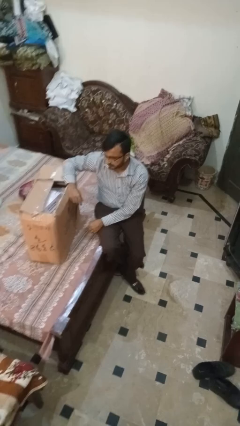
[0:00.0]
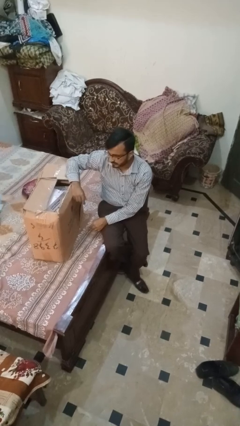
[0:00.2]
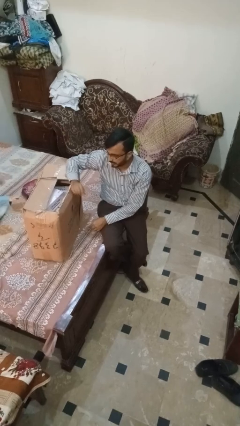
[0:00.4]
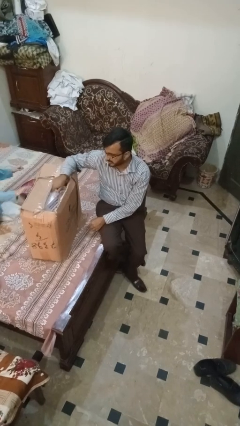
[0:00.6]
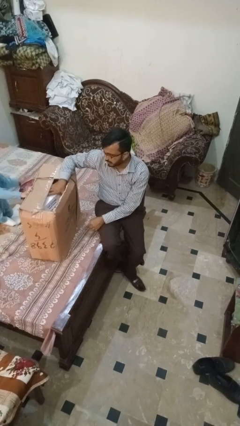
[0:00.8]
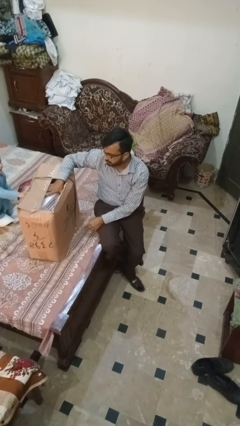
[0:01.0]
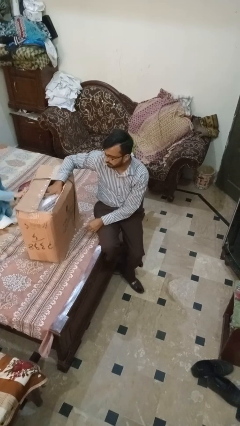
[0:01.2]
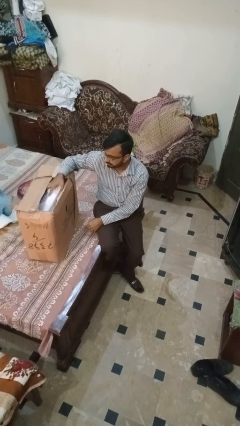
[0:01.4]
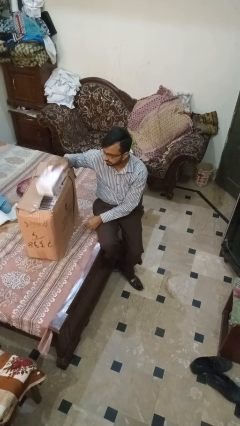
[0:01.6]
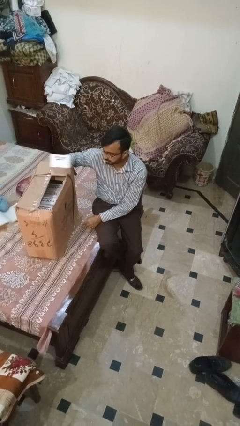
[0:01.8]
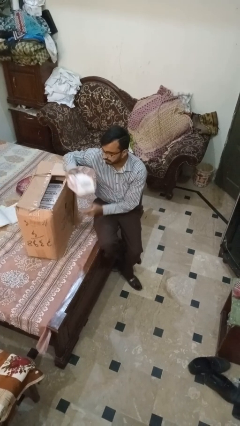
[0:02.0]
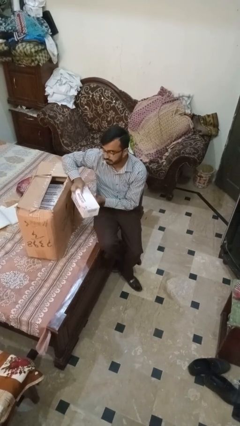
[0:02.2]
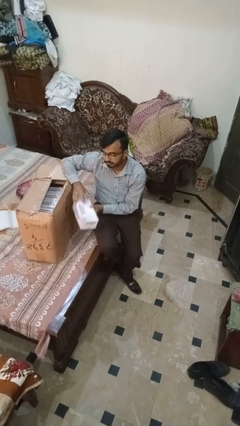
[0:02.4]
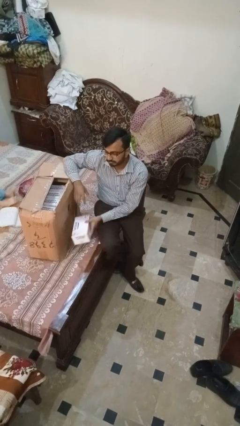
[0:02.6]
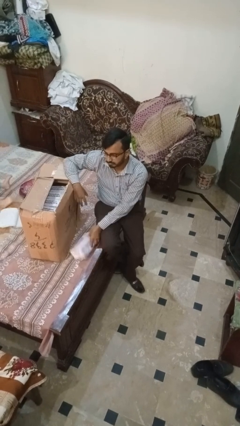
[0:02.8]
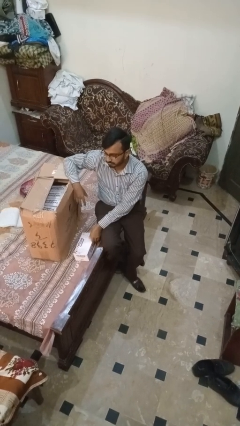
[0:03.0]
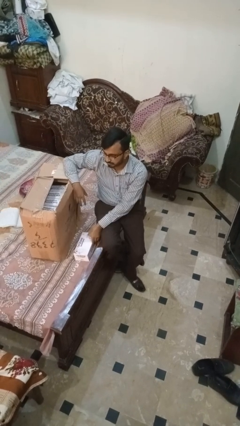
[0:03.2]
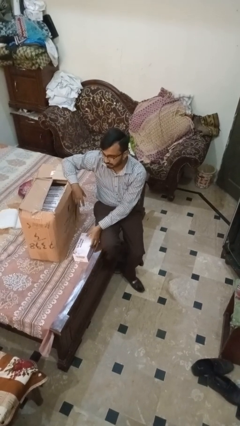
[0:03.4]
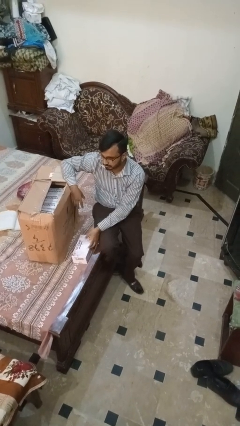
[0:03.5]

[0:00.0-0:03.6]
person takes object from box

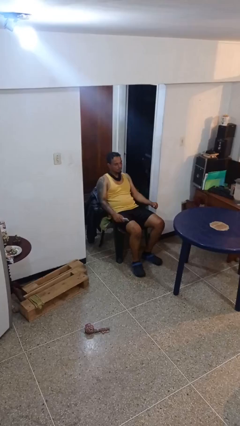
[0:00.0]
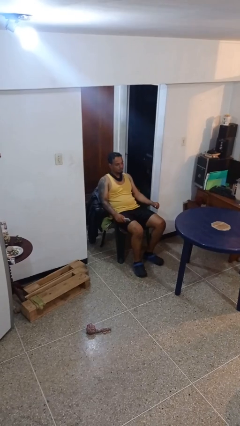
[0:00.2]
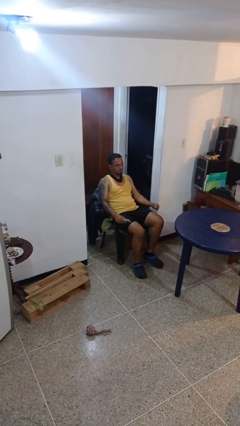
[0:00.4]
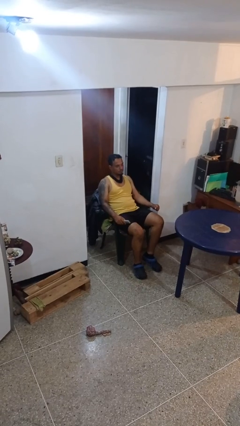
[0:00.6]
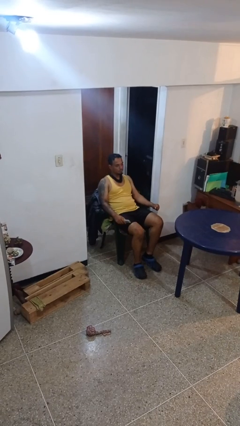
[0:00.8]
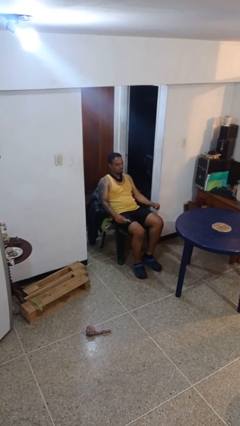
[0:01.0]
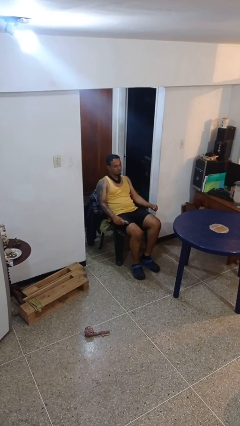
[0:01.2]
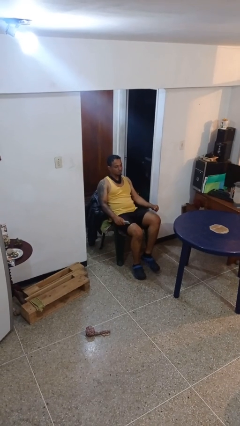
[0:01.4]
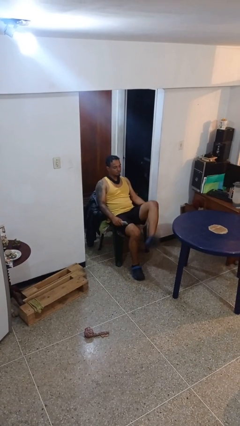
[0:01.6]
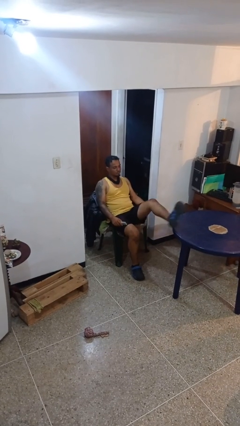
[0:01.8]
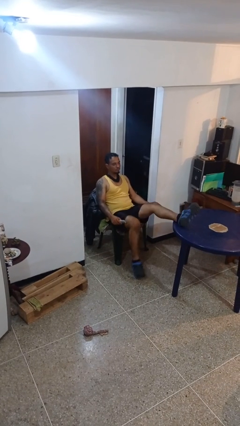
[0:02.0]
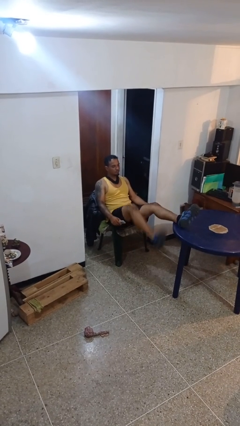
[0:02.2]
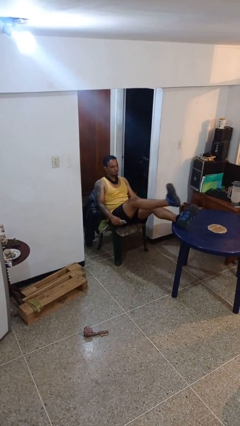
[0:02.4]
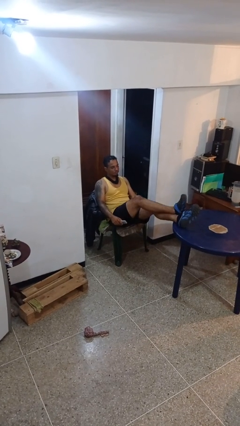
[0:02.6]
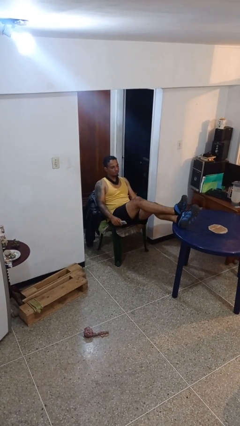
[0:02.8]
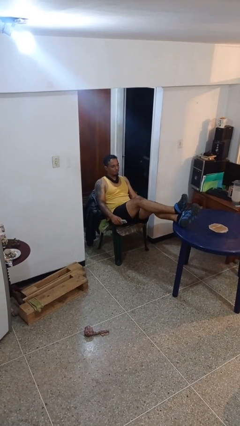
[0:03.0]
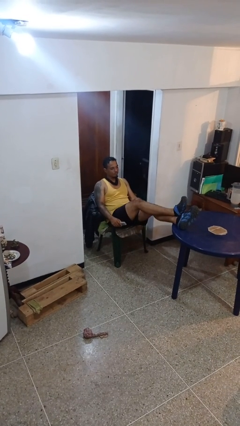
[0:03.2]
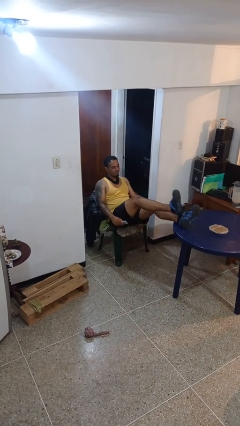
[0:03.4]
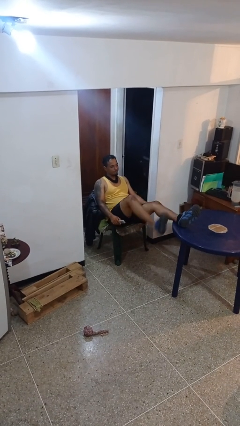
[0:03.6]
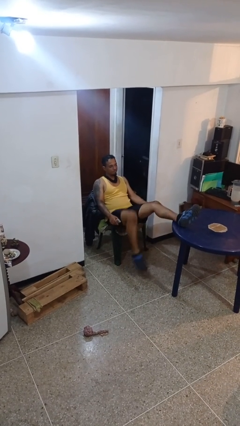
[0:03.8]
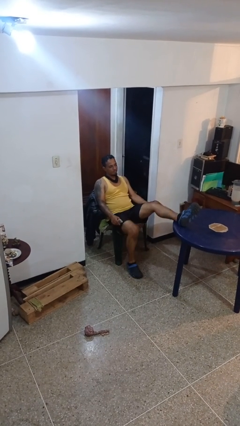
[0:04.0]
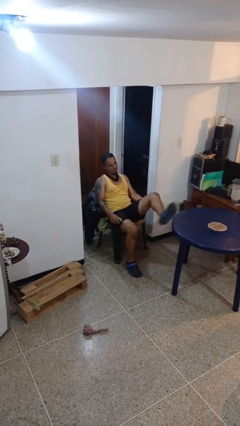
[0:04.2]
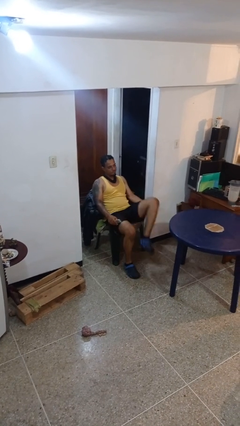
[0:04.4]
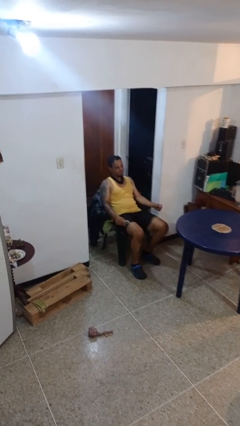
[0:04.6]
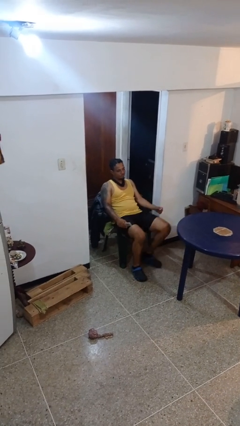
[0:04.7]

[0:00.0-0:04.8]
person puts feet up

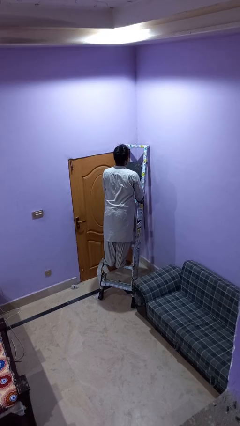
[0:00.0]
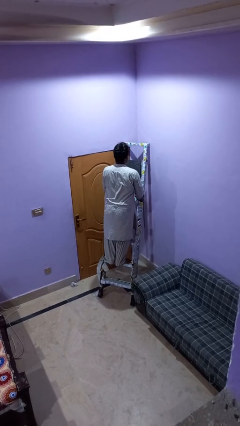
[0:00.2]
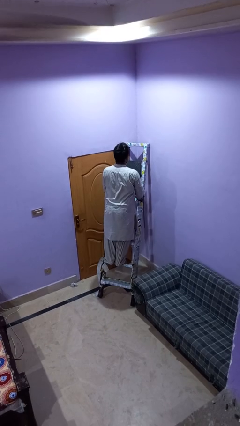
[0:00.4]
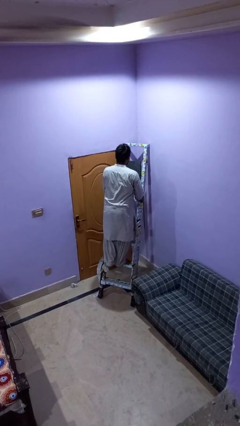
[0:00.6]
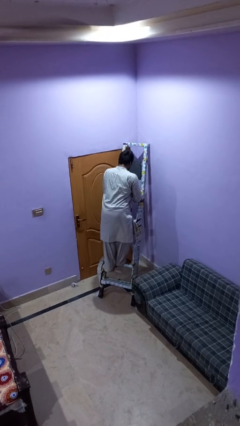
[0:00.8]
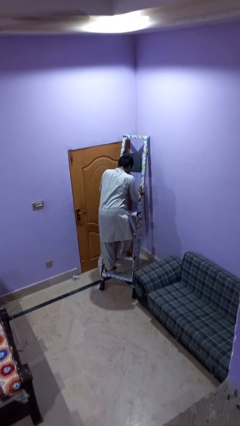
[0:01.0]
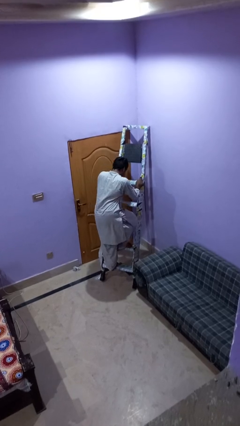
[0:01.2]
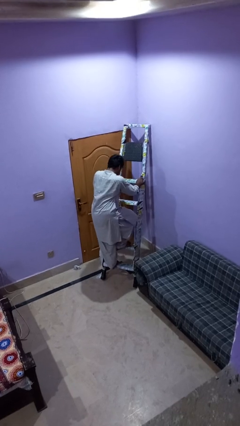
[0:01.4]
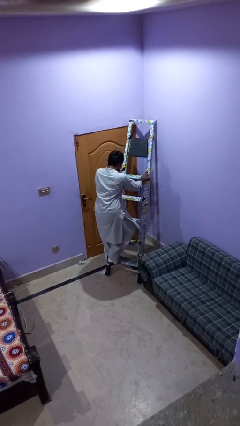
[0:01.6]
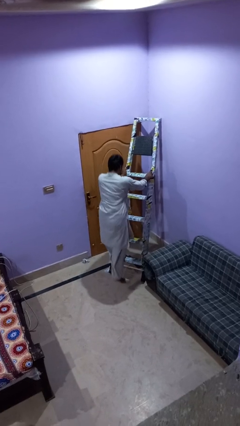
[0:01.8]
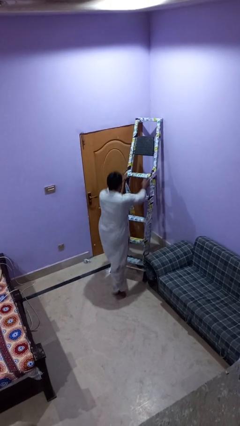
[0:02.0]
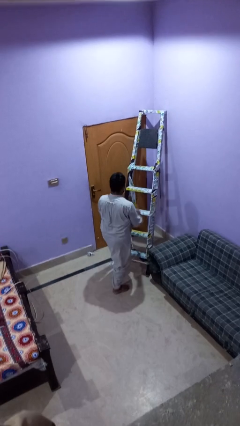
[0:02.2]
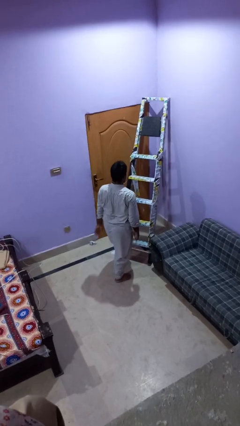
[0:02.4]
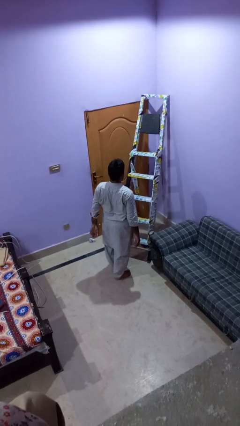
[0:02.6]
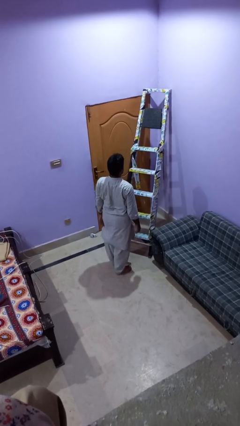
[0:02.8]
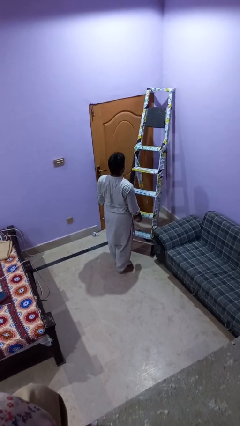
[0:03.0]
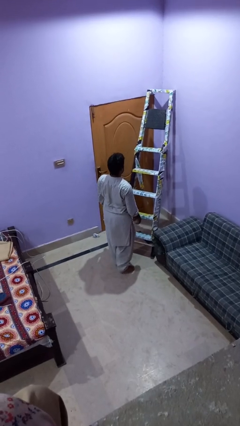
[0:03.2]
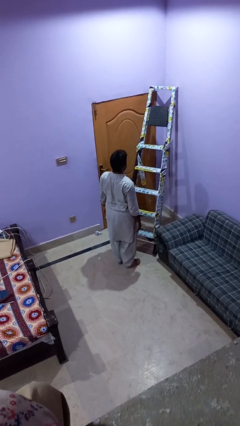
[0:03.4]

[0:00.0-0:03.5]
person climbs off chair

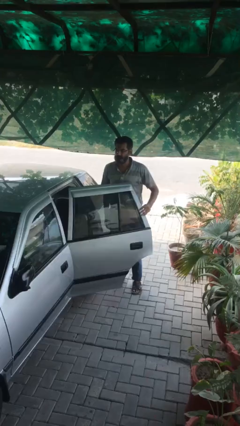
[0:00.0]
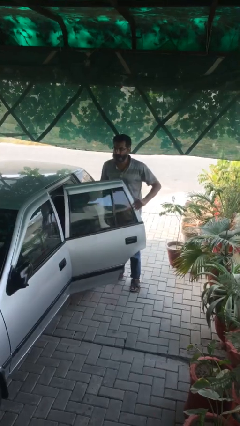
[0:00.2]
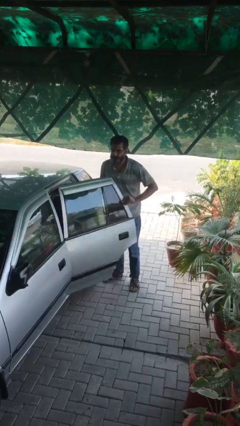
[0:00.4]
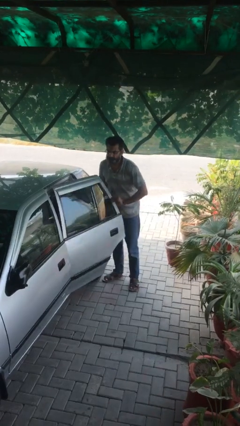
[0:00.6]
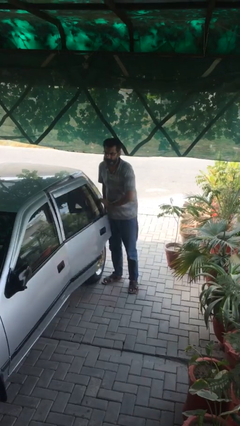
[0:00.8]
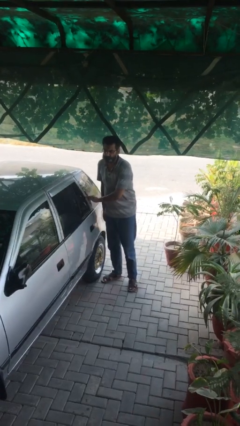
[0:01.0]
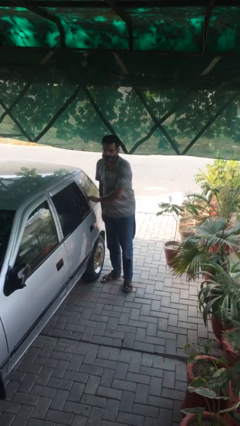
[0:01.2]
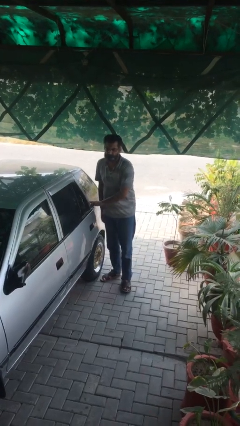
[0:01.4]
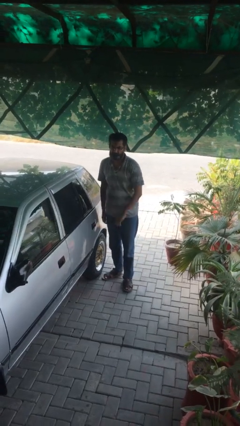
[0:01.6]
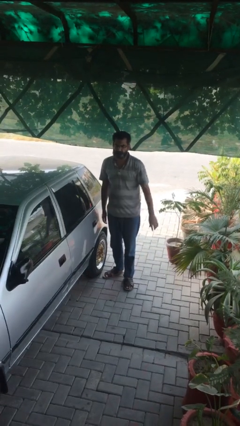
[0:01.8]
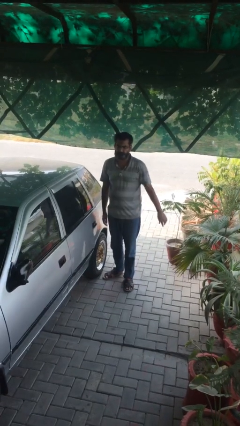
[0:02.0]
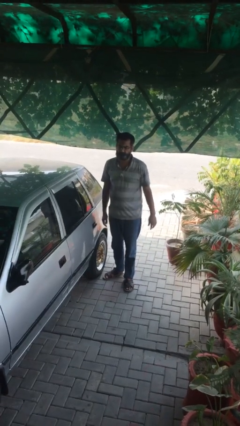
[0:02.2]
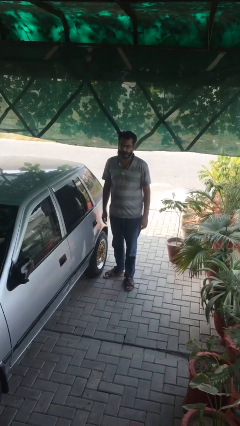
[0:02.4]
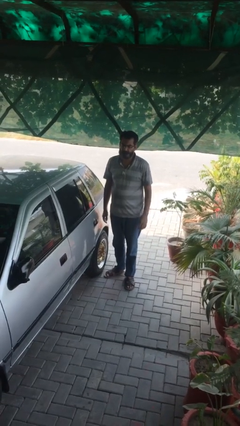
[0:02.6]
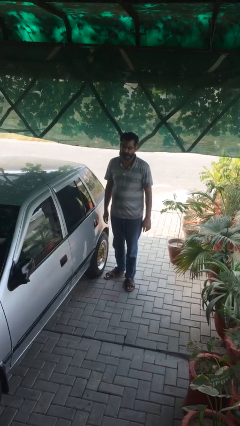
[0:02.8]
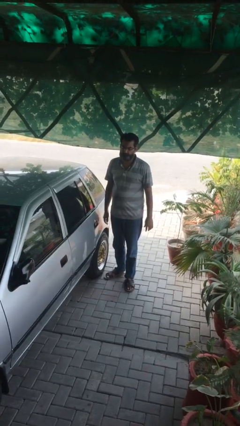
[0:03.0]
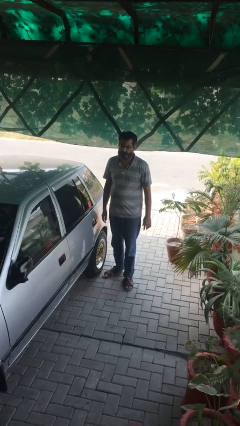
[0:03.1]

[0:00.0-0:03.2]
person closes car door

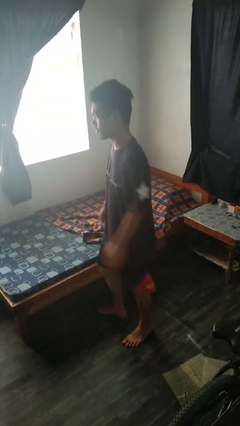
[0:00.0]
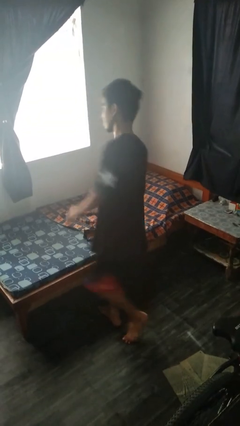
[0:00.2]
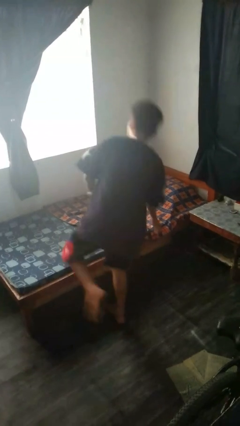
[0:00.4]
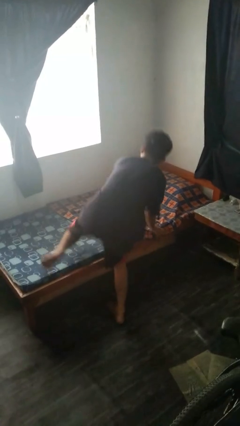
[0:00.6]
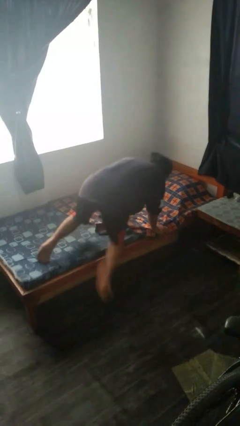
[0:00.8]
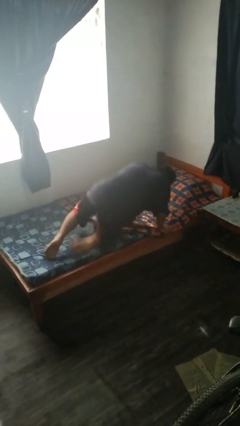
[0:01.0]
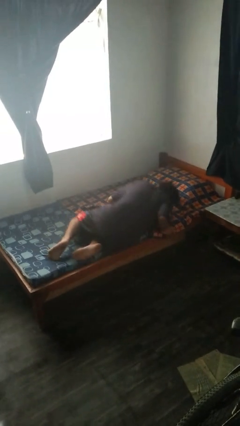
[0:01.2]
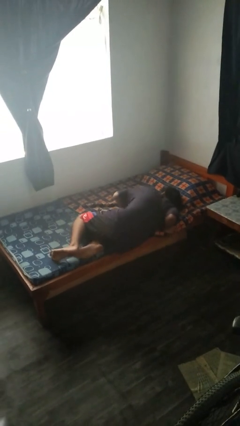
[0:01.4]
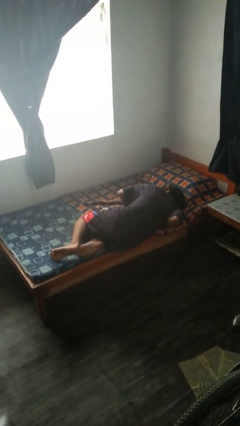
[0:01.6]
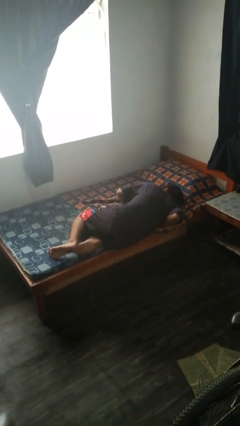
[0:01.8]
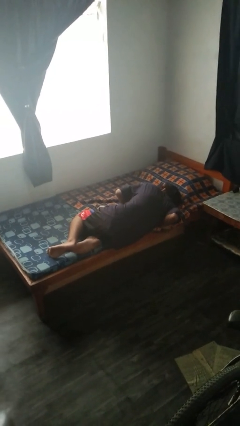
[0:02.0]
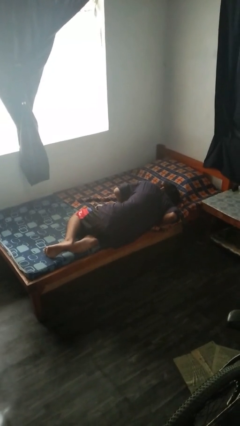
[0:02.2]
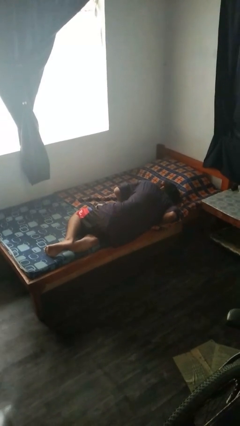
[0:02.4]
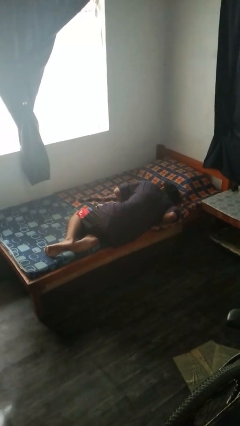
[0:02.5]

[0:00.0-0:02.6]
person lies down on bed
